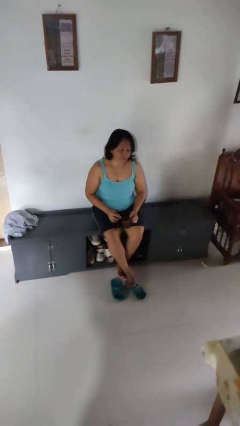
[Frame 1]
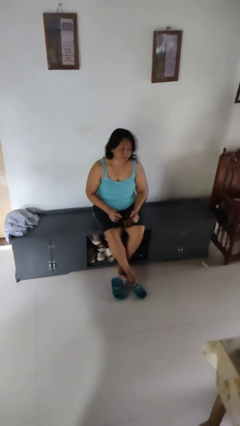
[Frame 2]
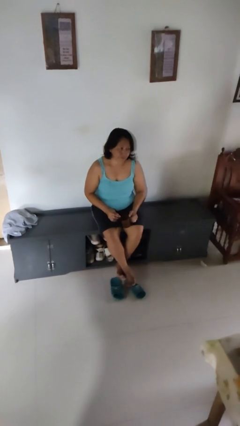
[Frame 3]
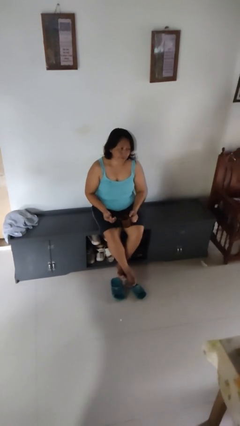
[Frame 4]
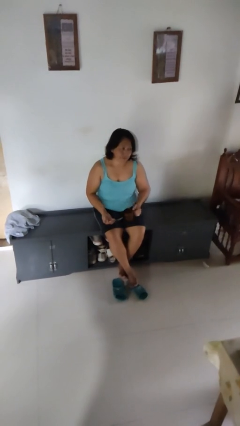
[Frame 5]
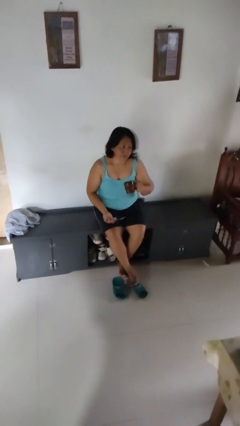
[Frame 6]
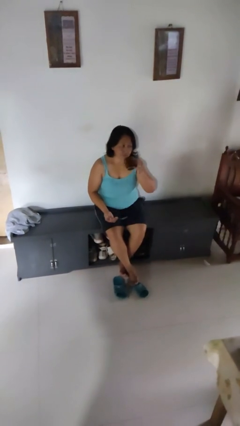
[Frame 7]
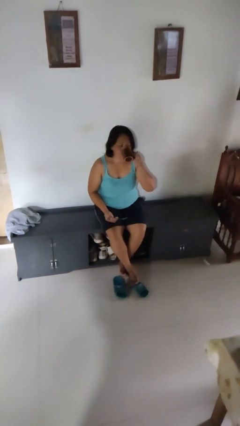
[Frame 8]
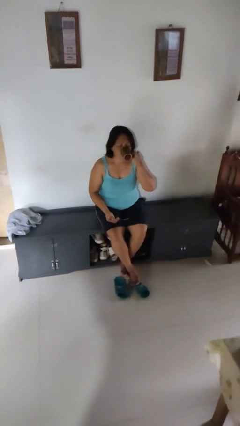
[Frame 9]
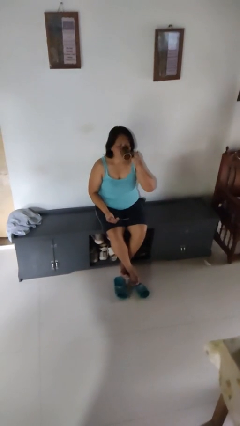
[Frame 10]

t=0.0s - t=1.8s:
person drinks from mug

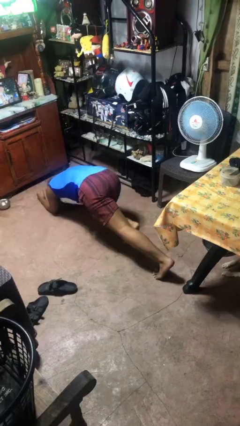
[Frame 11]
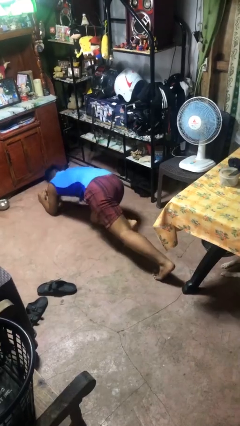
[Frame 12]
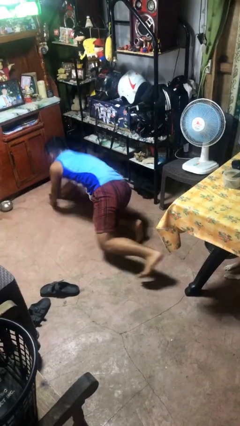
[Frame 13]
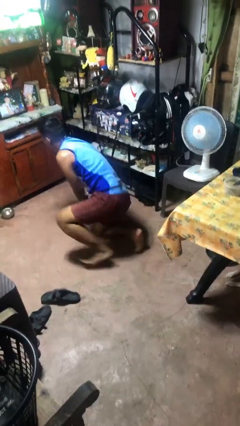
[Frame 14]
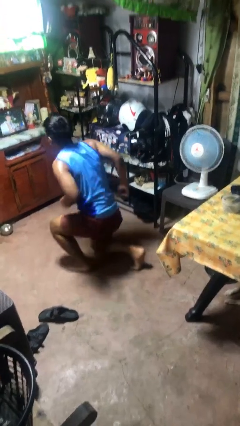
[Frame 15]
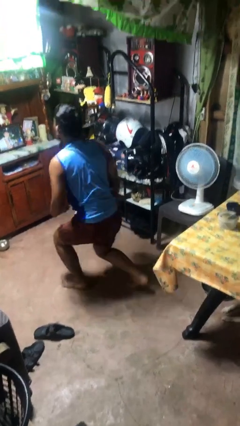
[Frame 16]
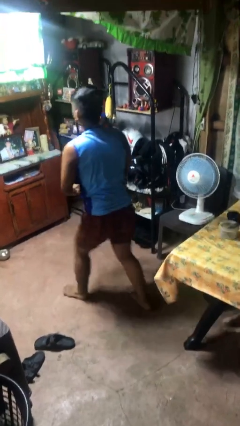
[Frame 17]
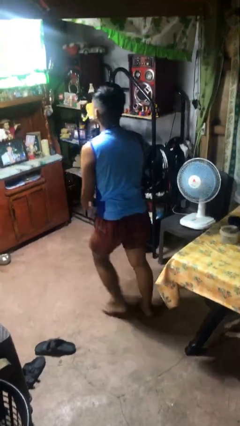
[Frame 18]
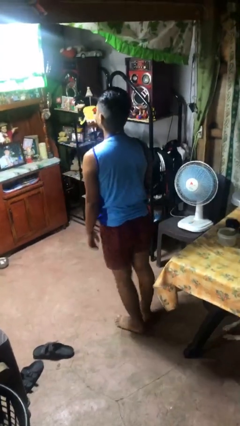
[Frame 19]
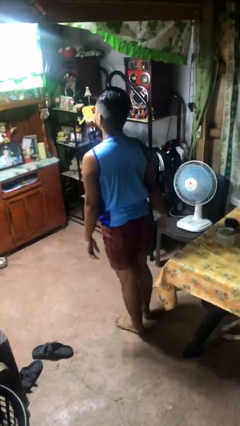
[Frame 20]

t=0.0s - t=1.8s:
person stands up from floor

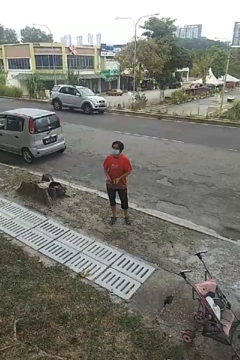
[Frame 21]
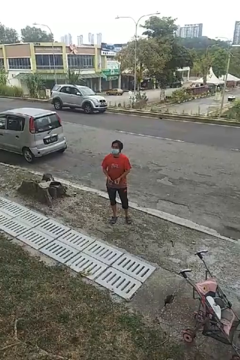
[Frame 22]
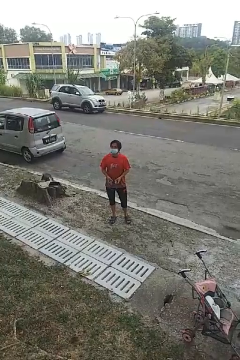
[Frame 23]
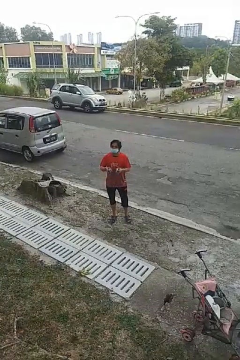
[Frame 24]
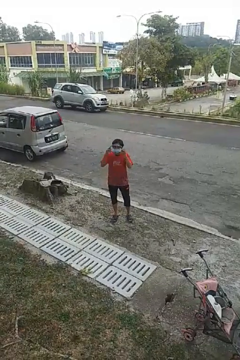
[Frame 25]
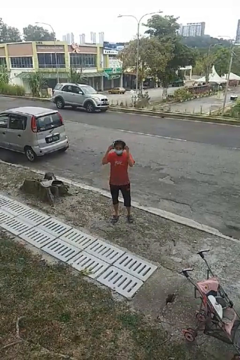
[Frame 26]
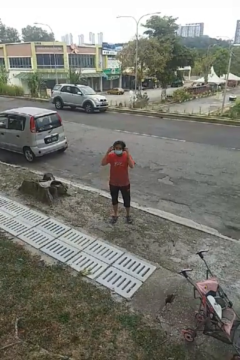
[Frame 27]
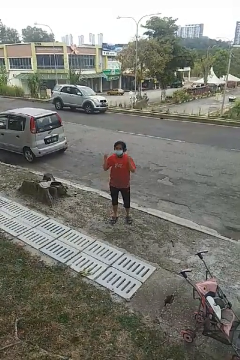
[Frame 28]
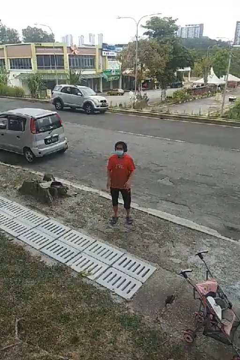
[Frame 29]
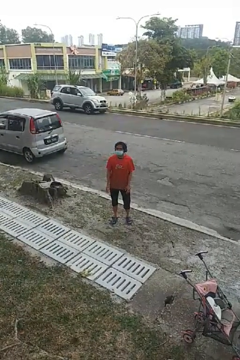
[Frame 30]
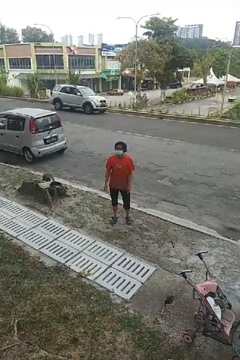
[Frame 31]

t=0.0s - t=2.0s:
person puts on headphones

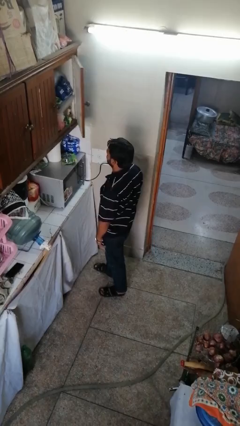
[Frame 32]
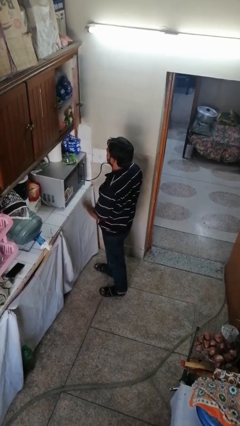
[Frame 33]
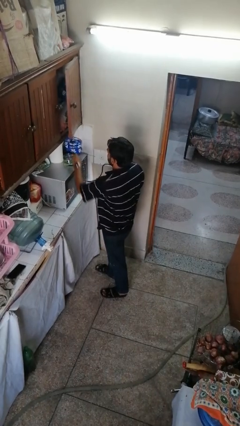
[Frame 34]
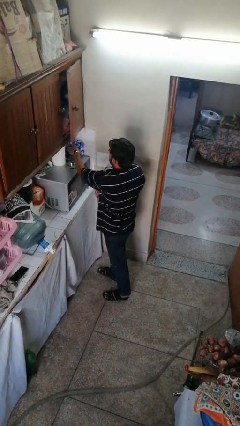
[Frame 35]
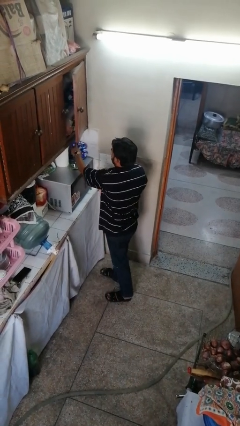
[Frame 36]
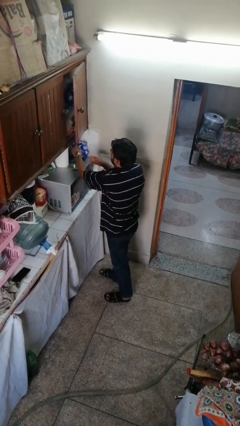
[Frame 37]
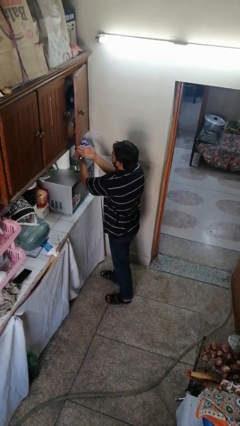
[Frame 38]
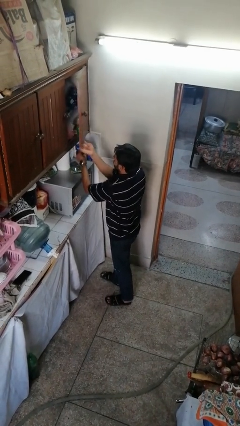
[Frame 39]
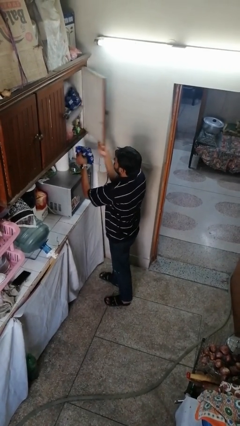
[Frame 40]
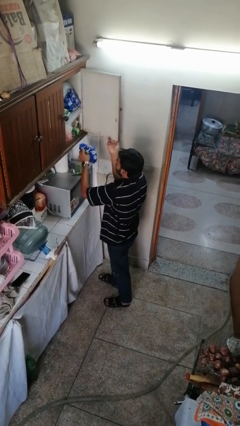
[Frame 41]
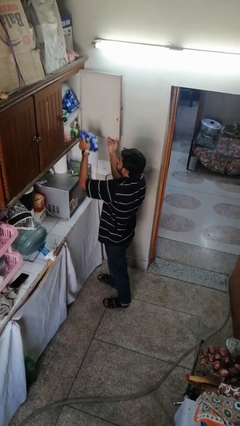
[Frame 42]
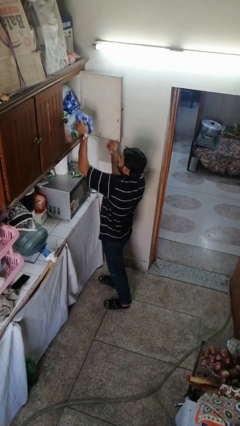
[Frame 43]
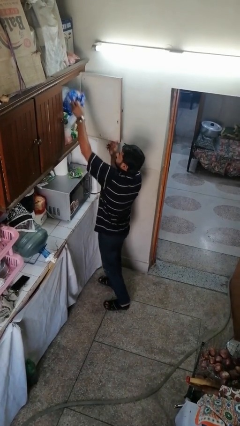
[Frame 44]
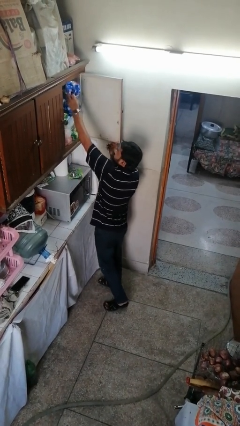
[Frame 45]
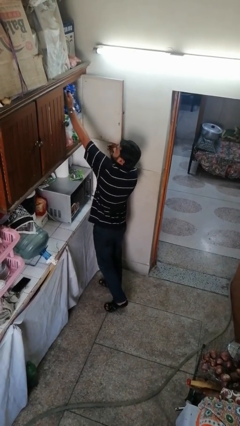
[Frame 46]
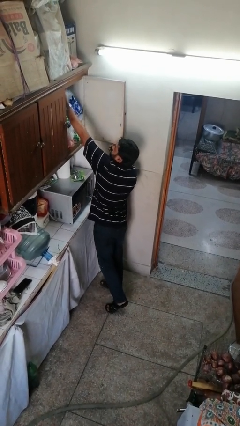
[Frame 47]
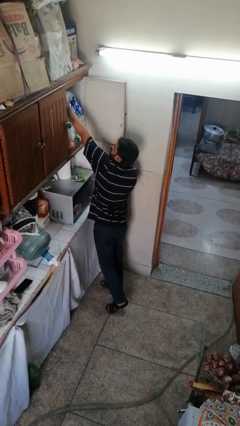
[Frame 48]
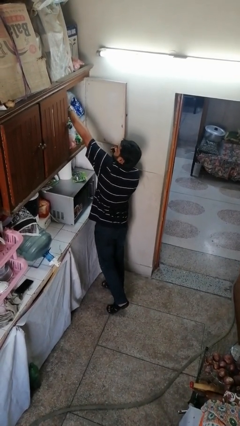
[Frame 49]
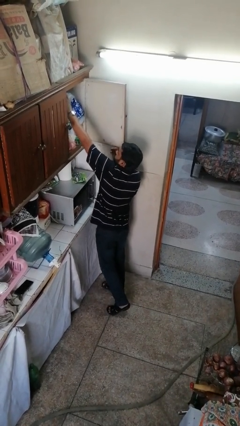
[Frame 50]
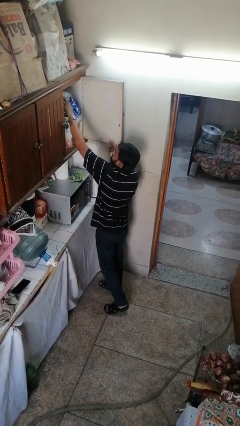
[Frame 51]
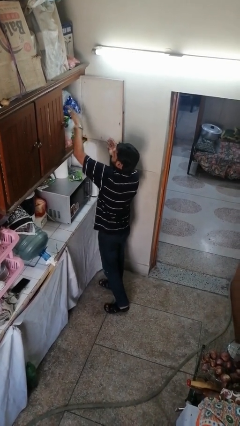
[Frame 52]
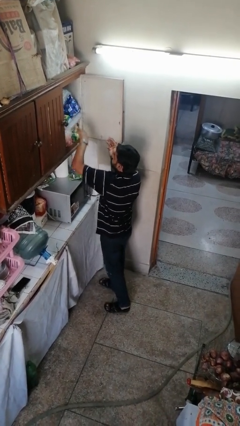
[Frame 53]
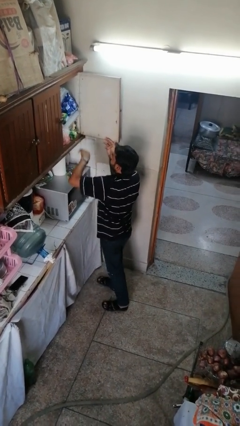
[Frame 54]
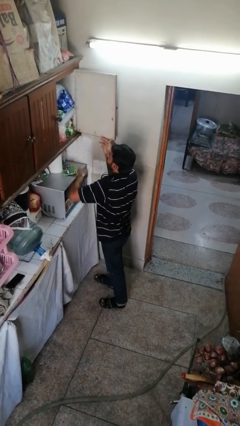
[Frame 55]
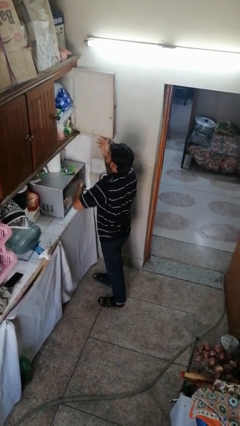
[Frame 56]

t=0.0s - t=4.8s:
person loads groceries into cabinet

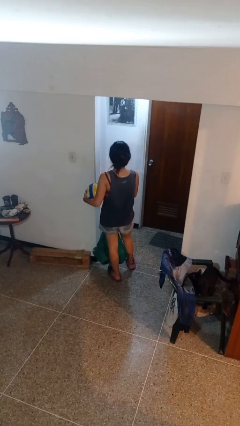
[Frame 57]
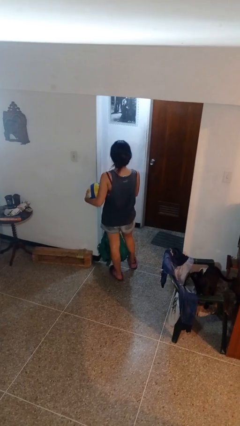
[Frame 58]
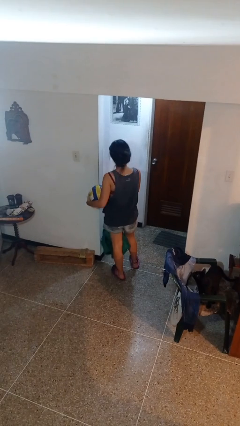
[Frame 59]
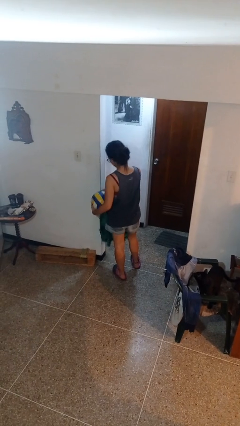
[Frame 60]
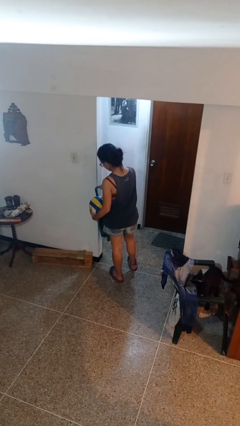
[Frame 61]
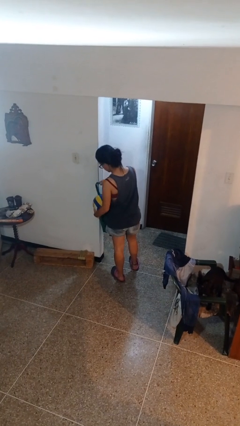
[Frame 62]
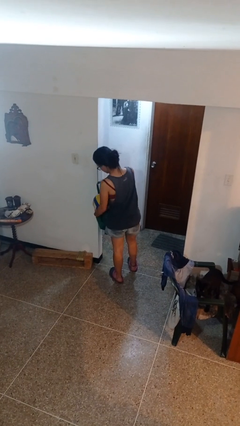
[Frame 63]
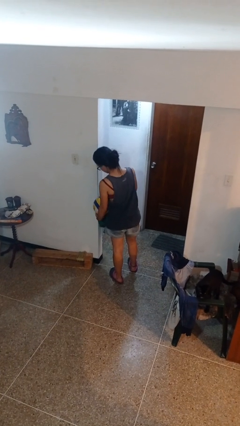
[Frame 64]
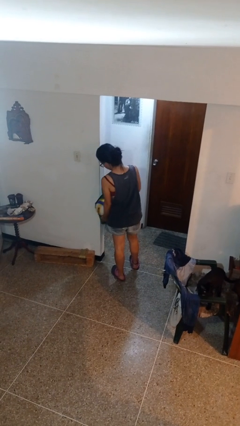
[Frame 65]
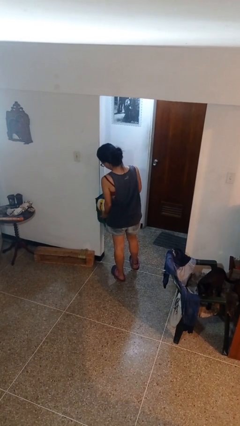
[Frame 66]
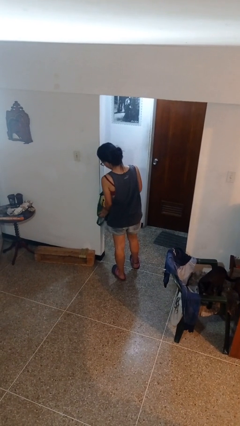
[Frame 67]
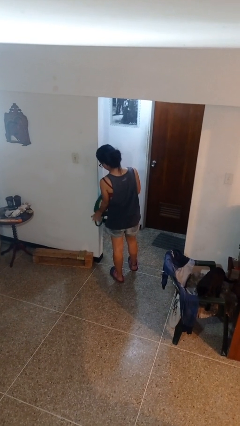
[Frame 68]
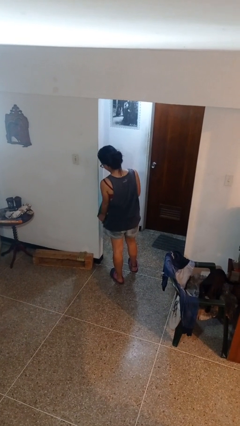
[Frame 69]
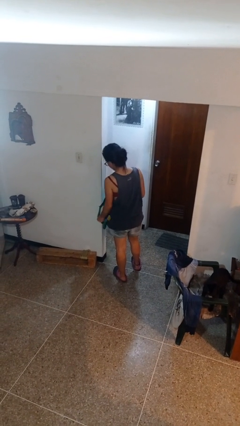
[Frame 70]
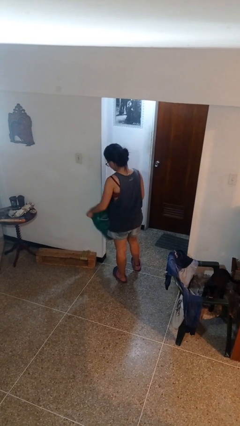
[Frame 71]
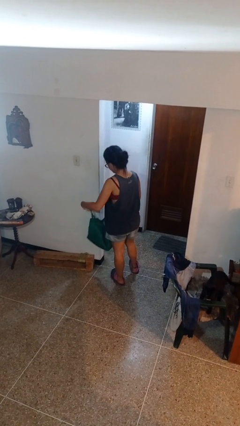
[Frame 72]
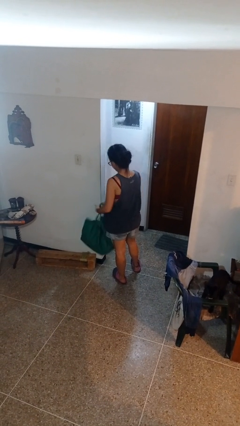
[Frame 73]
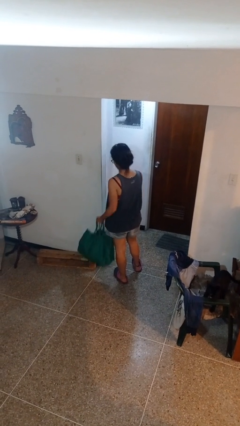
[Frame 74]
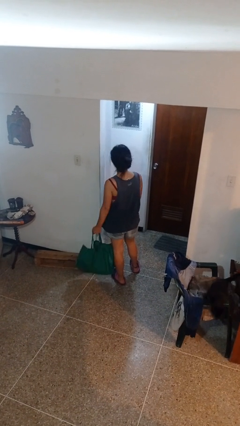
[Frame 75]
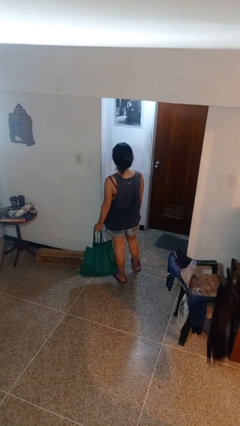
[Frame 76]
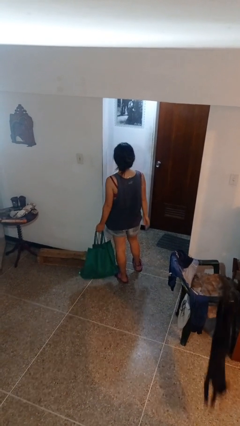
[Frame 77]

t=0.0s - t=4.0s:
person puts object into bag

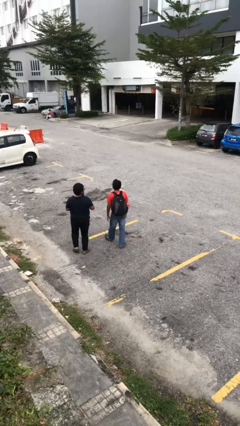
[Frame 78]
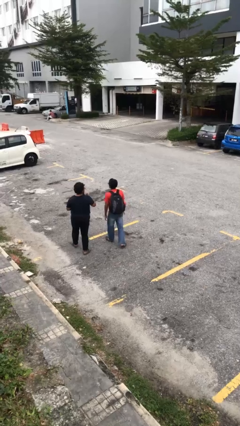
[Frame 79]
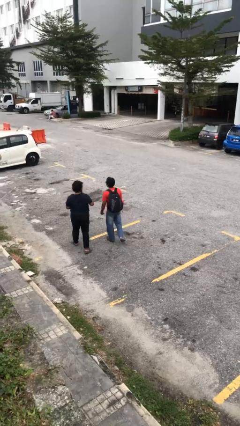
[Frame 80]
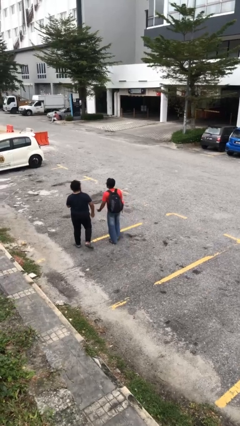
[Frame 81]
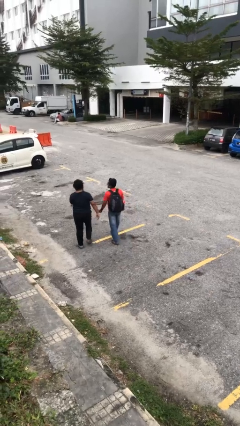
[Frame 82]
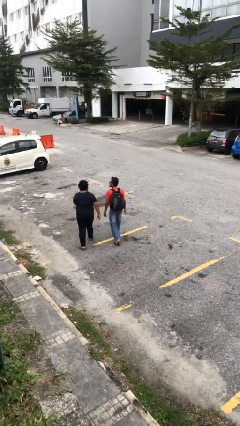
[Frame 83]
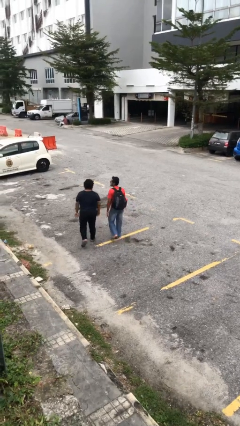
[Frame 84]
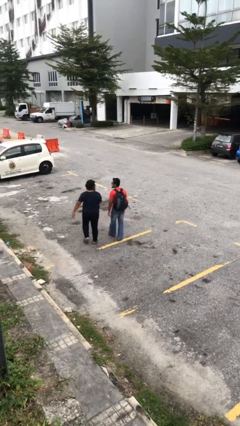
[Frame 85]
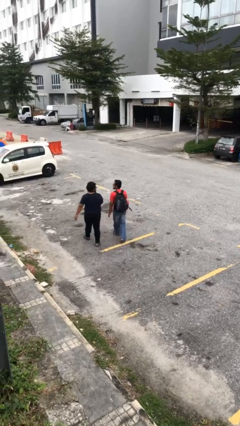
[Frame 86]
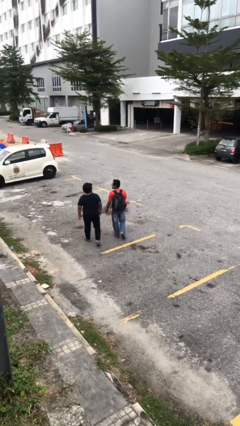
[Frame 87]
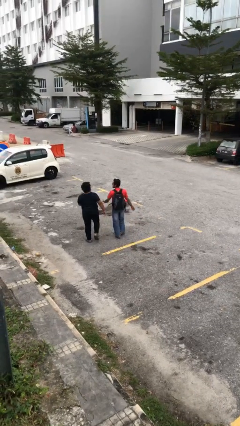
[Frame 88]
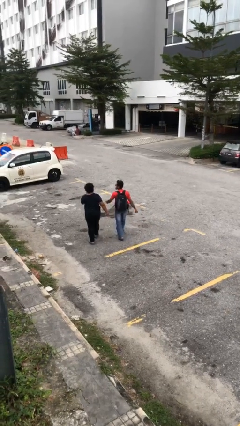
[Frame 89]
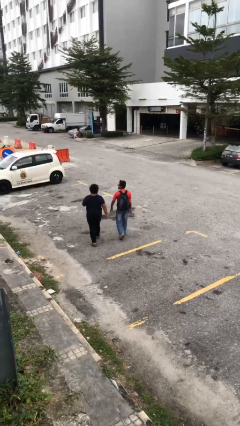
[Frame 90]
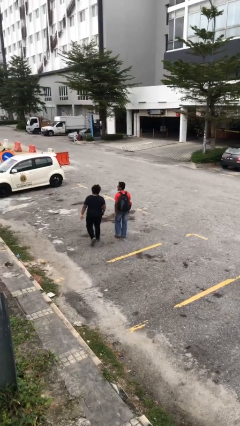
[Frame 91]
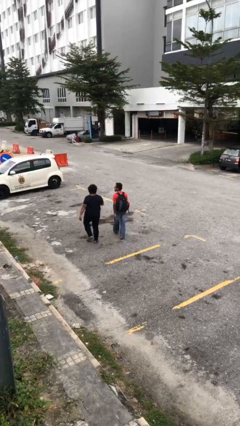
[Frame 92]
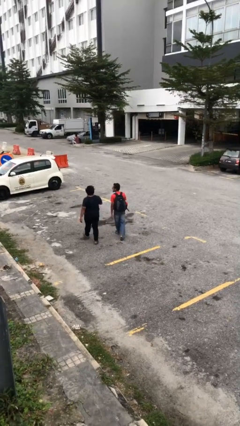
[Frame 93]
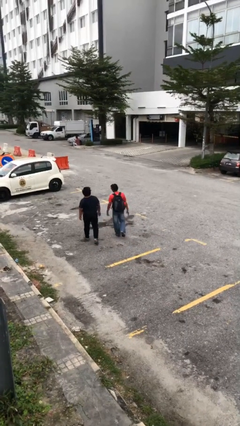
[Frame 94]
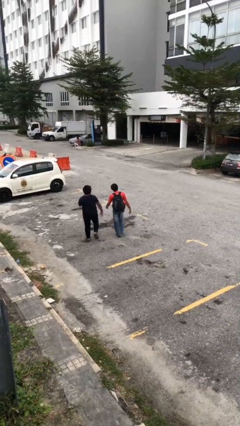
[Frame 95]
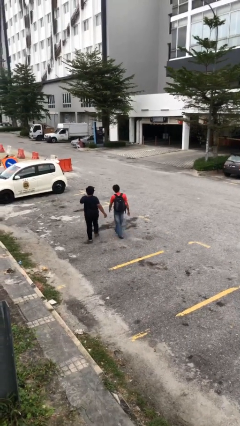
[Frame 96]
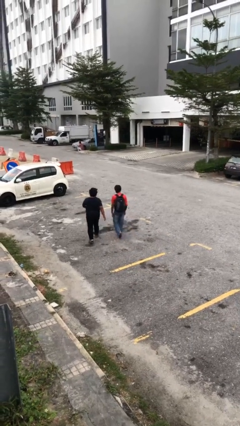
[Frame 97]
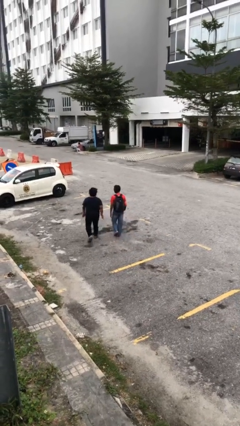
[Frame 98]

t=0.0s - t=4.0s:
person talks to person
